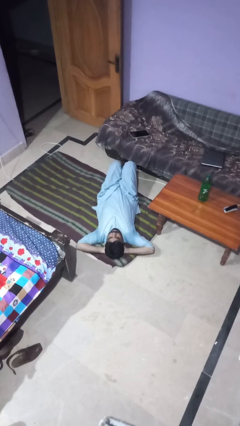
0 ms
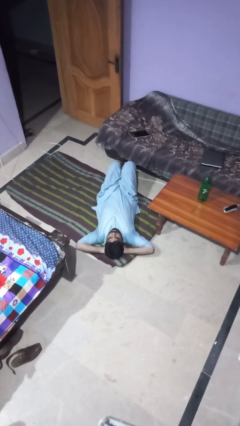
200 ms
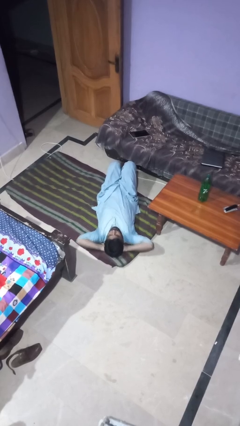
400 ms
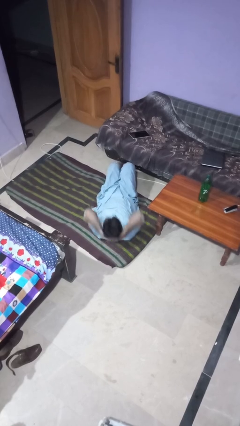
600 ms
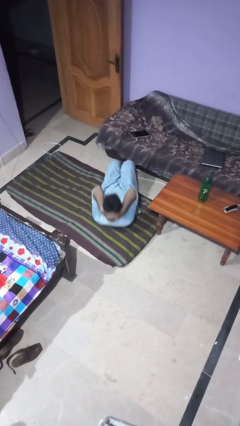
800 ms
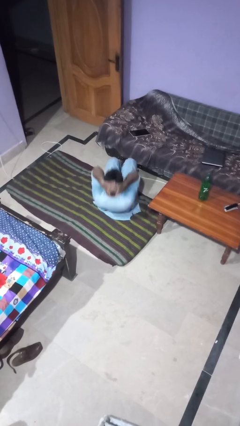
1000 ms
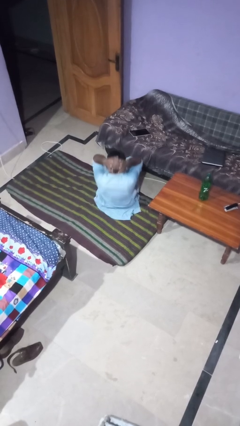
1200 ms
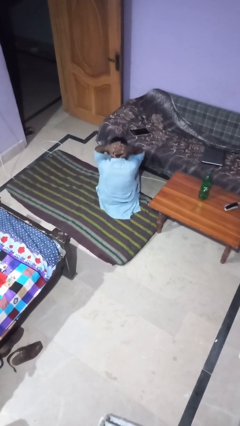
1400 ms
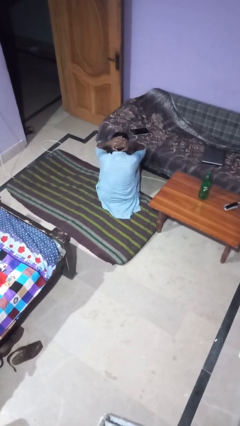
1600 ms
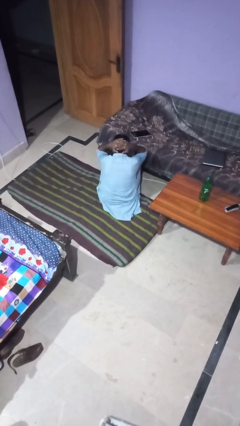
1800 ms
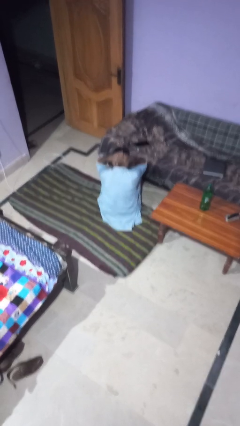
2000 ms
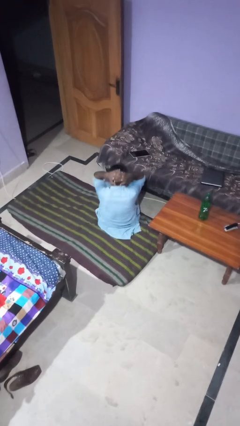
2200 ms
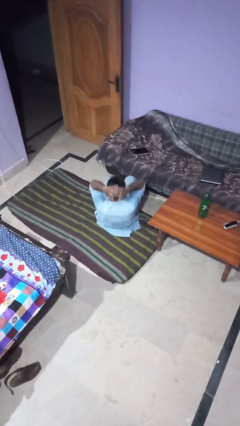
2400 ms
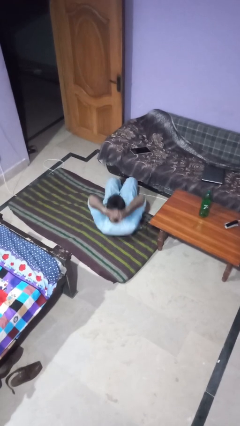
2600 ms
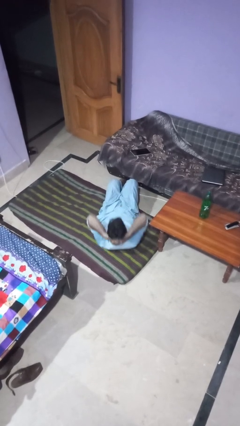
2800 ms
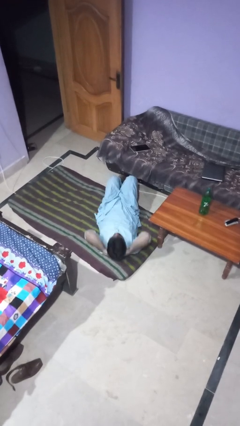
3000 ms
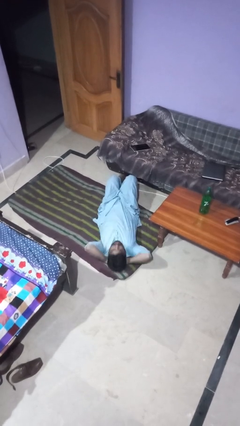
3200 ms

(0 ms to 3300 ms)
person exercises with situp

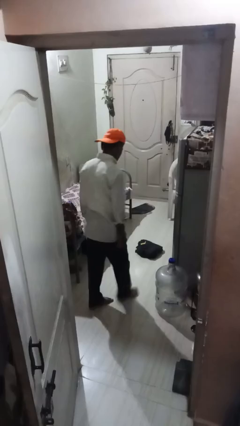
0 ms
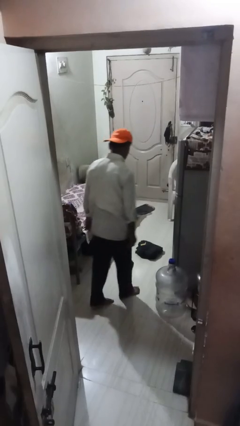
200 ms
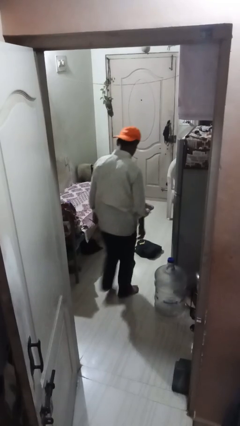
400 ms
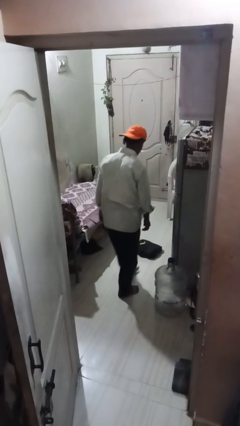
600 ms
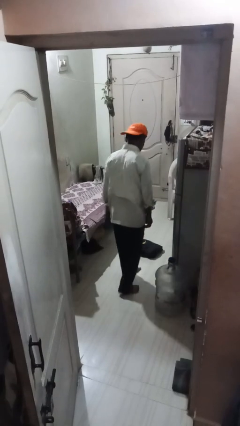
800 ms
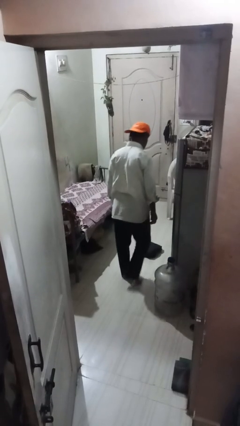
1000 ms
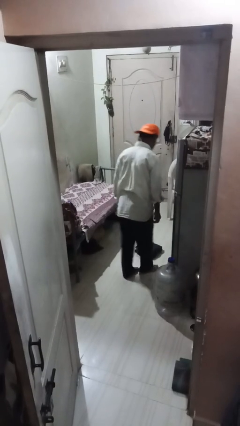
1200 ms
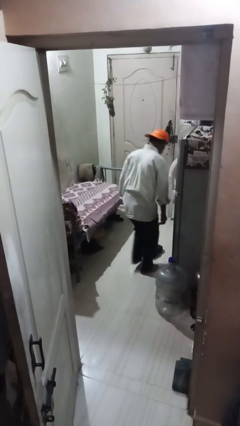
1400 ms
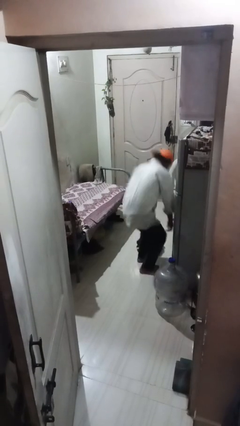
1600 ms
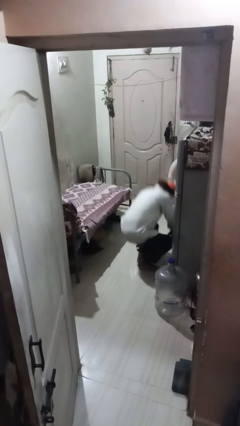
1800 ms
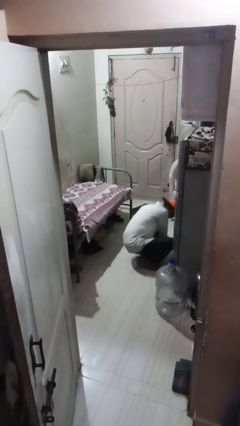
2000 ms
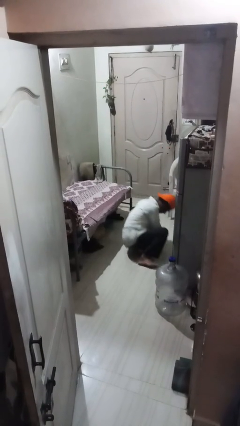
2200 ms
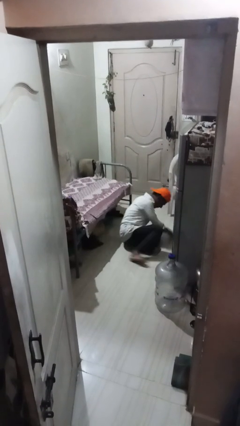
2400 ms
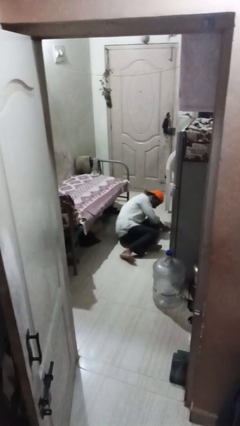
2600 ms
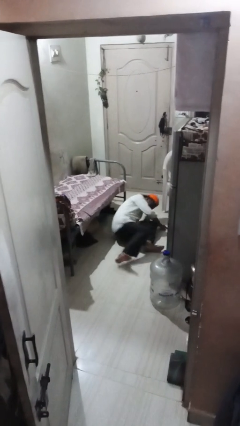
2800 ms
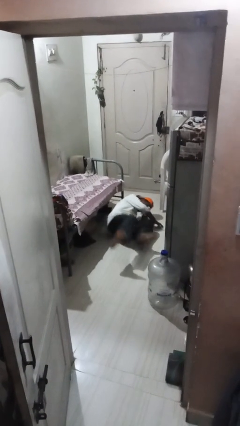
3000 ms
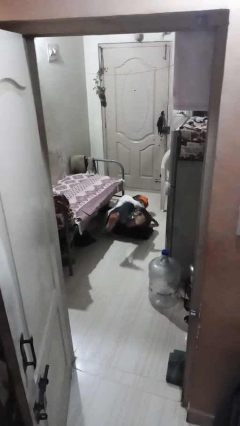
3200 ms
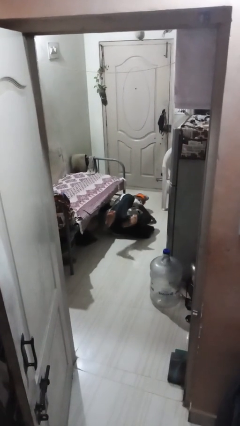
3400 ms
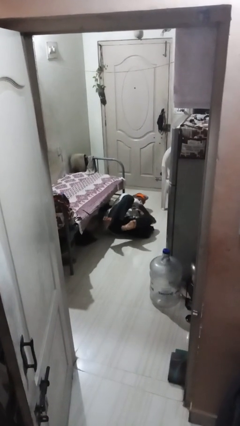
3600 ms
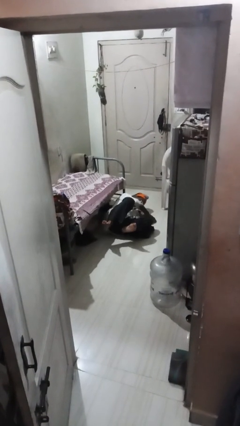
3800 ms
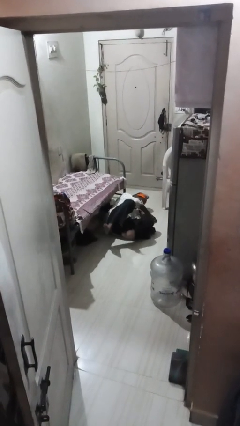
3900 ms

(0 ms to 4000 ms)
person trips on object on floor

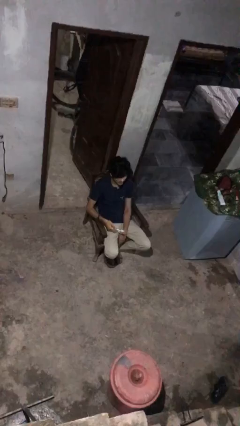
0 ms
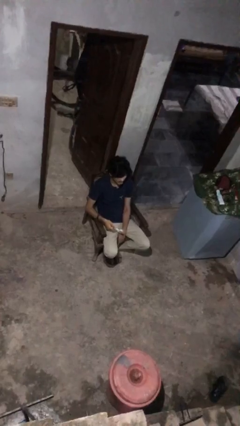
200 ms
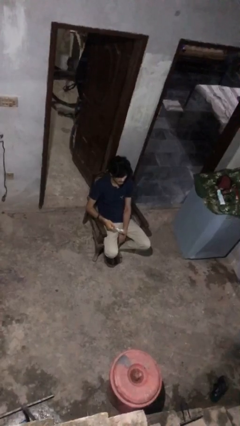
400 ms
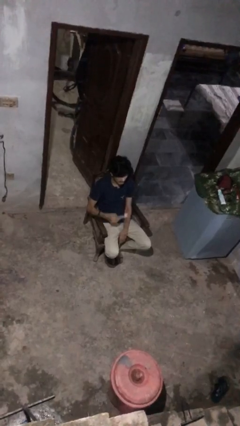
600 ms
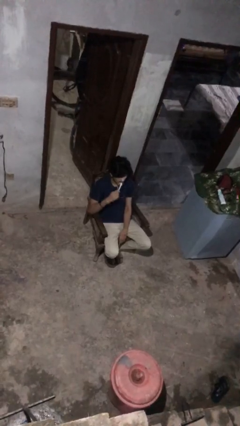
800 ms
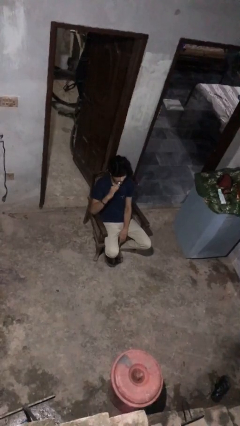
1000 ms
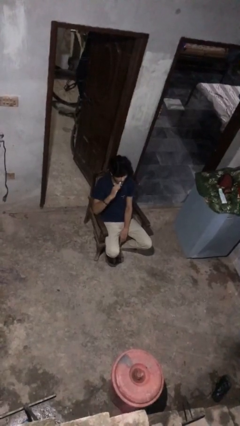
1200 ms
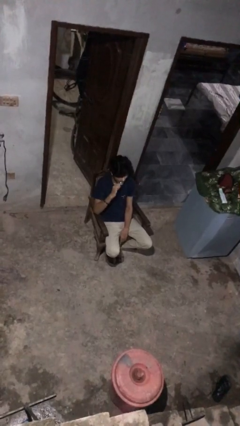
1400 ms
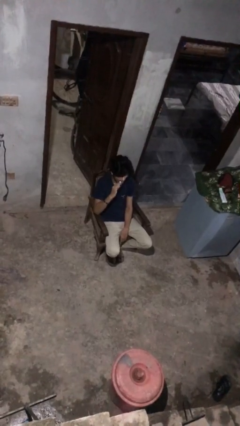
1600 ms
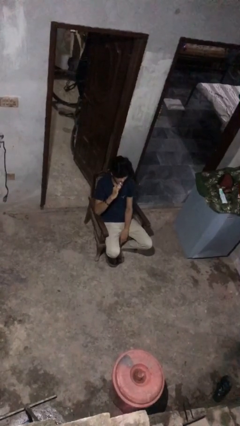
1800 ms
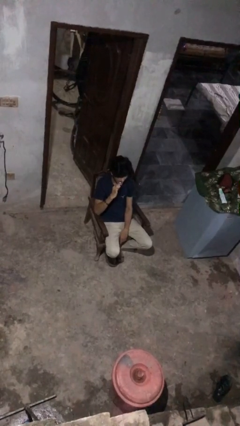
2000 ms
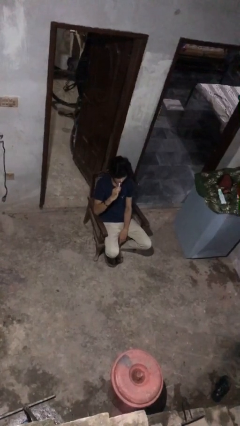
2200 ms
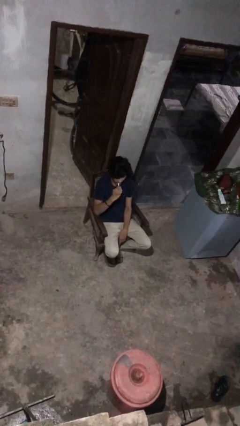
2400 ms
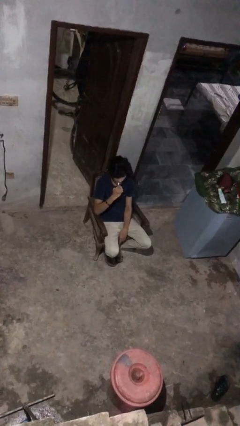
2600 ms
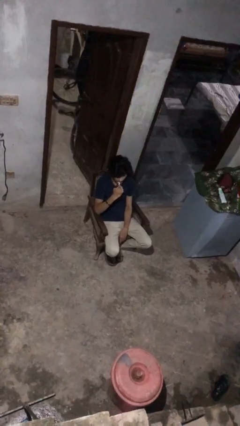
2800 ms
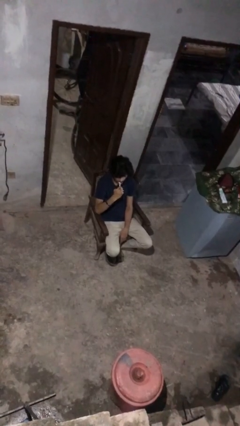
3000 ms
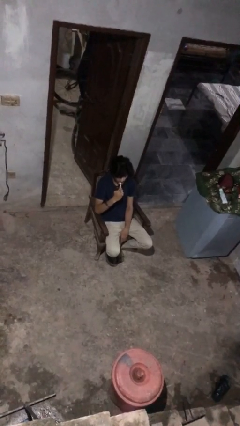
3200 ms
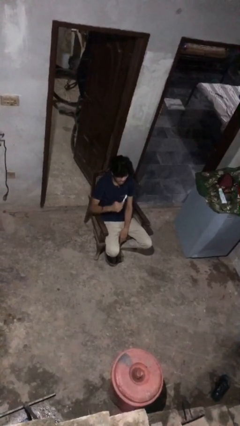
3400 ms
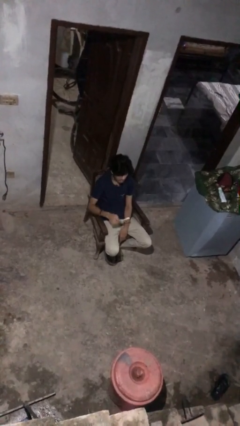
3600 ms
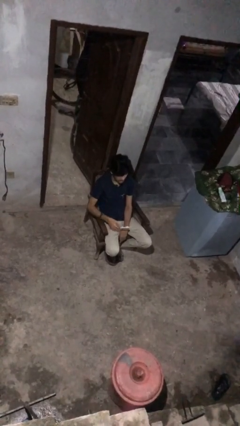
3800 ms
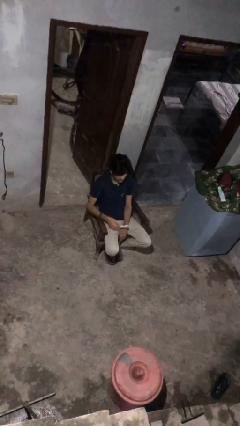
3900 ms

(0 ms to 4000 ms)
person brushes teeth

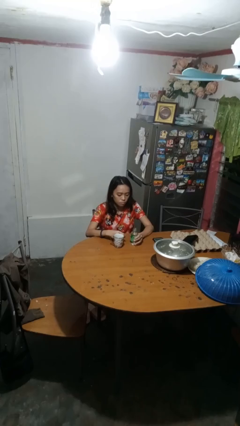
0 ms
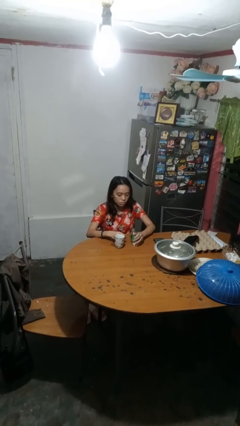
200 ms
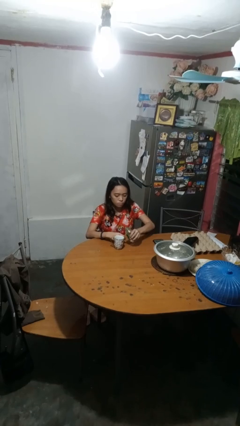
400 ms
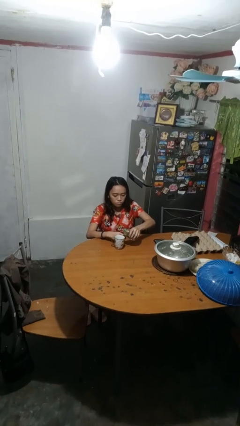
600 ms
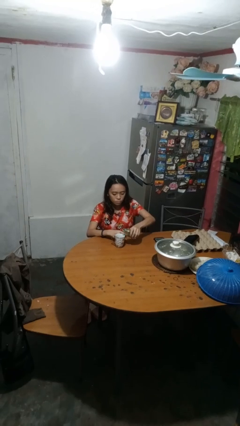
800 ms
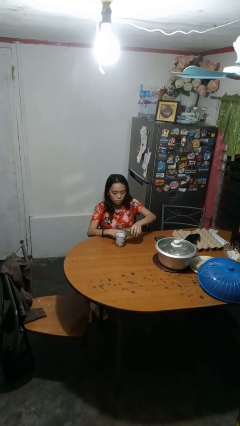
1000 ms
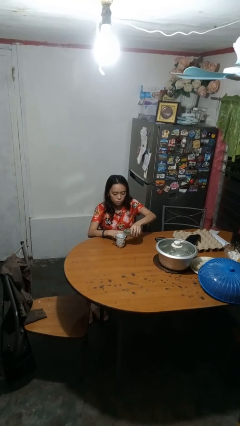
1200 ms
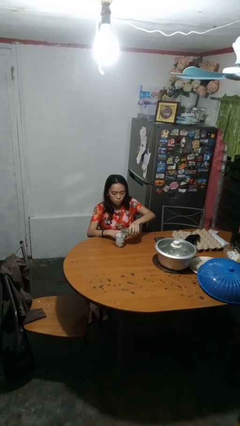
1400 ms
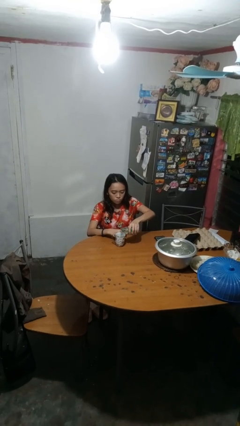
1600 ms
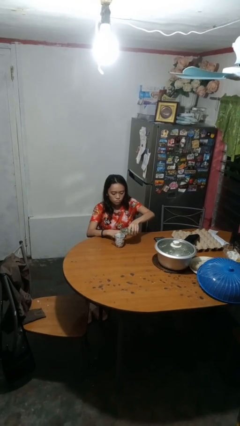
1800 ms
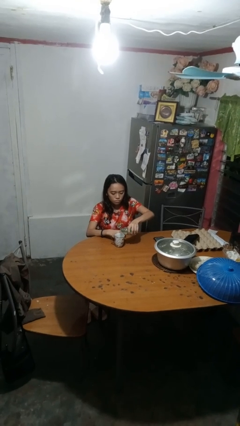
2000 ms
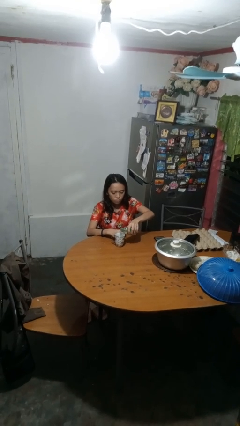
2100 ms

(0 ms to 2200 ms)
person pours liquid into cup

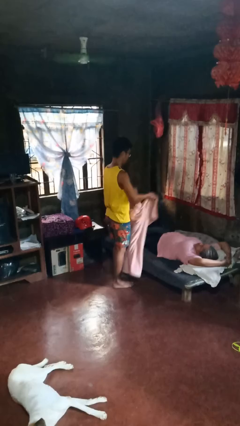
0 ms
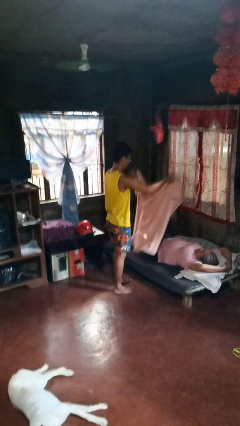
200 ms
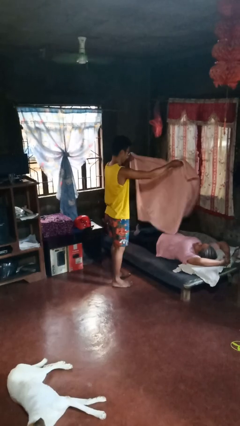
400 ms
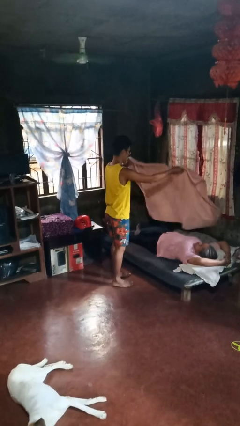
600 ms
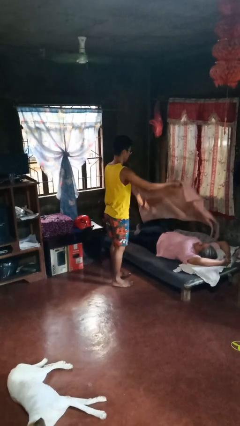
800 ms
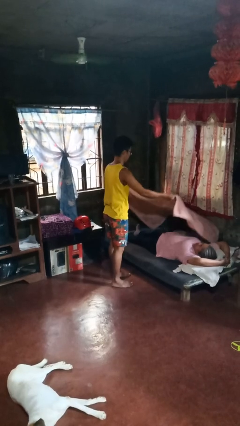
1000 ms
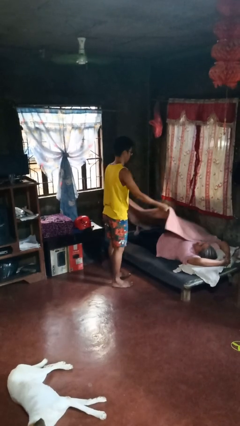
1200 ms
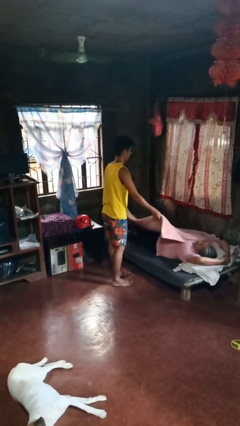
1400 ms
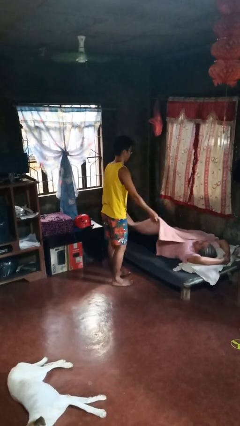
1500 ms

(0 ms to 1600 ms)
person covers friend with blanket

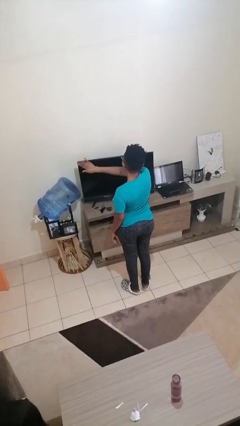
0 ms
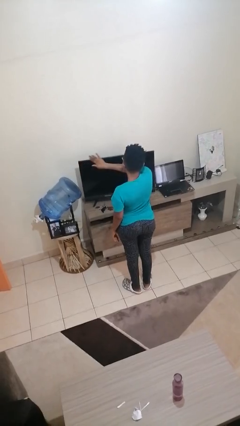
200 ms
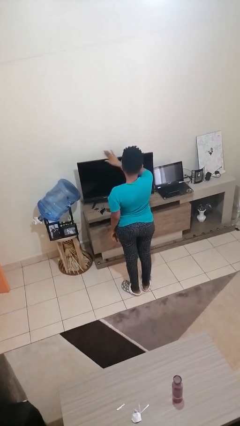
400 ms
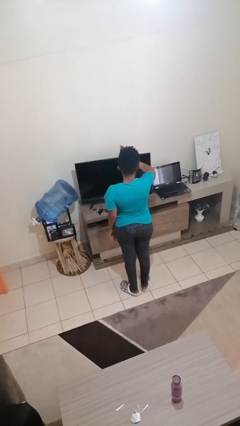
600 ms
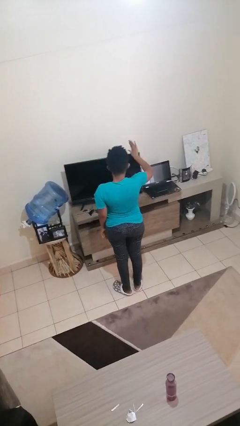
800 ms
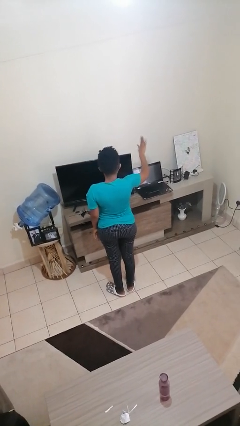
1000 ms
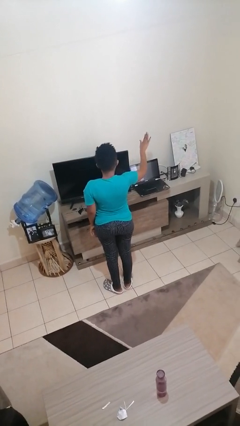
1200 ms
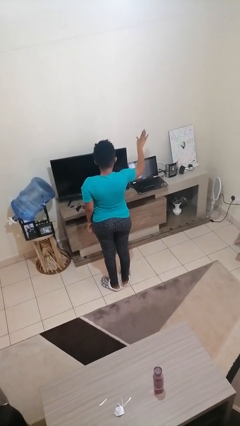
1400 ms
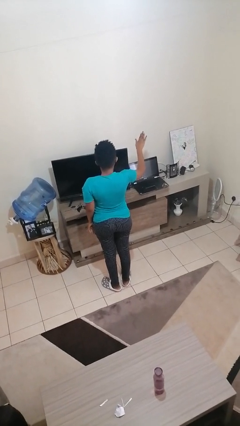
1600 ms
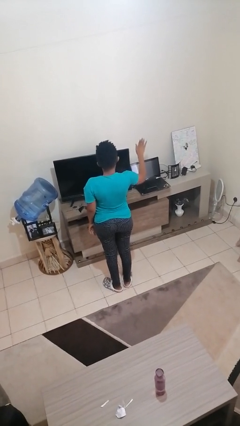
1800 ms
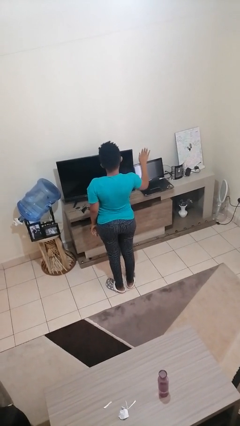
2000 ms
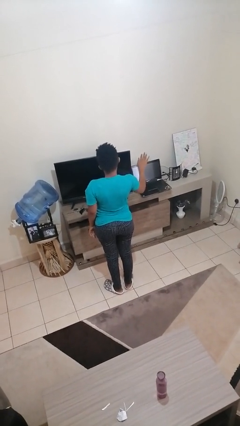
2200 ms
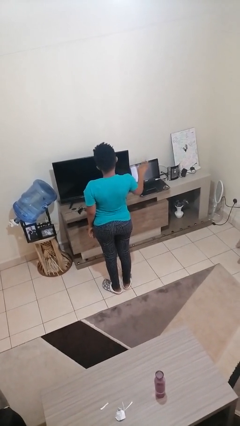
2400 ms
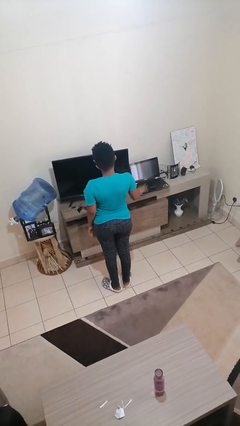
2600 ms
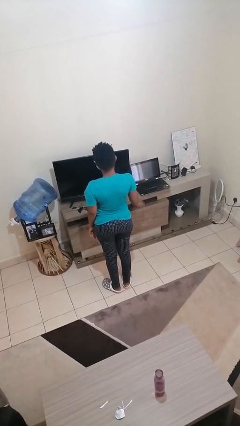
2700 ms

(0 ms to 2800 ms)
person gestures swipe right
